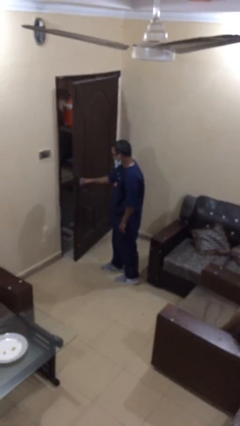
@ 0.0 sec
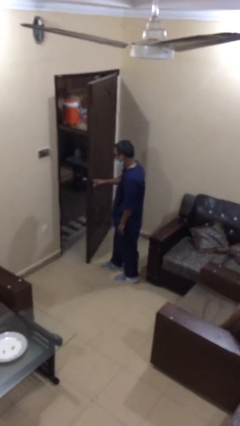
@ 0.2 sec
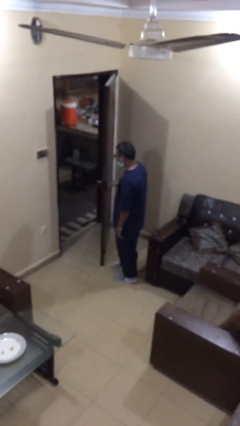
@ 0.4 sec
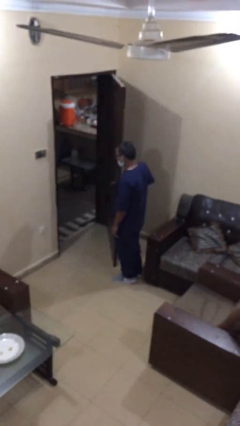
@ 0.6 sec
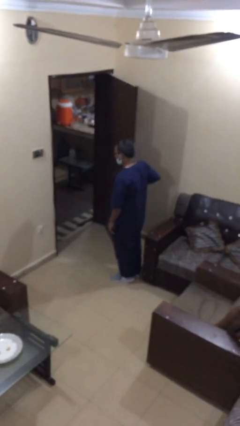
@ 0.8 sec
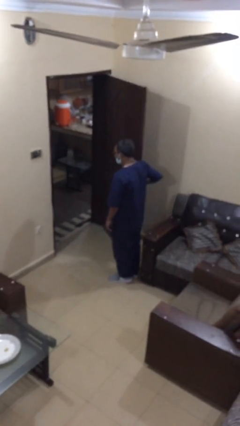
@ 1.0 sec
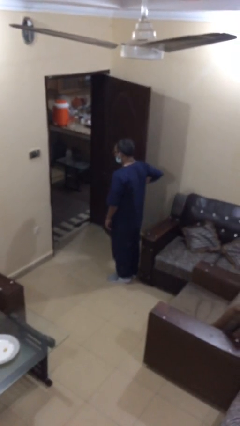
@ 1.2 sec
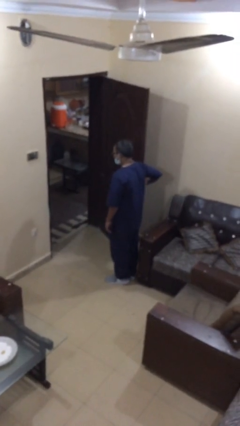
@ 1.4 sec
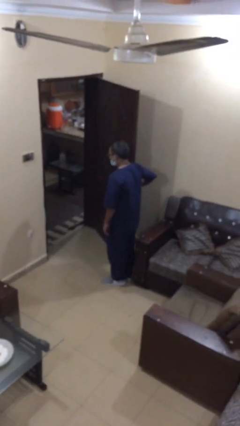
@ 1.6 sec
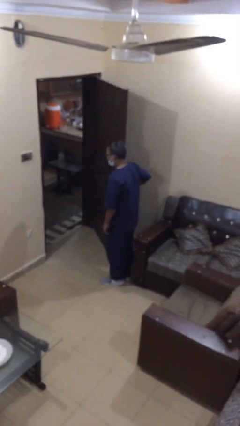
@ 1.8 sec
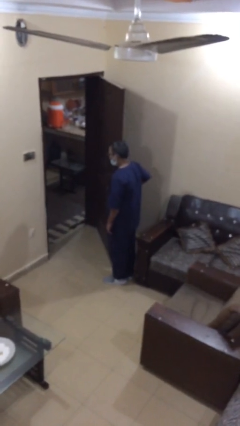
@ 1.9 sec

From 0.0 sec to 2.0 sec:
person opens facility door

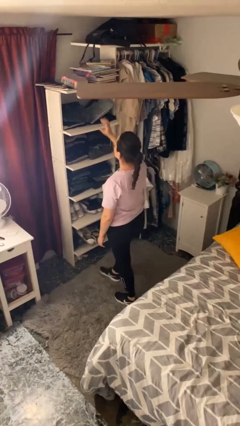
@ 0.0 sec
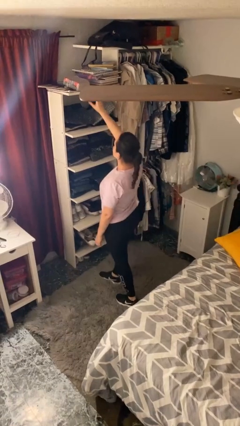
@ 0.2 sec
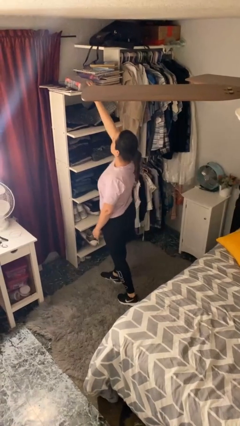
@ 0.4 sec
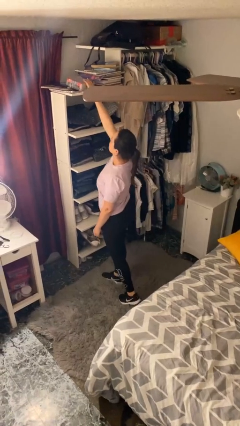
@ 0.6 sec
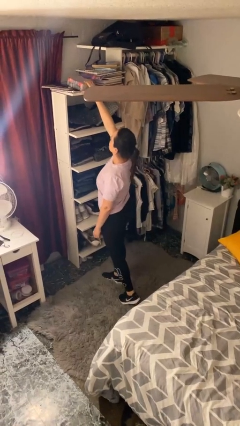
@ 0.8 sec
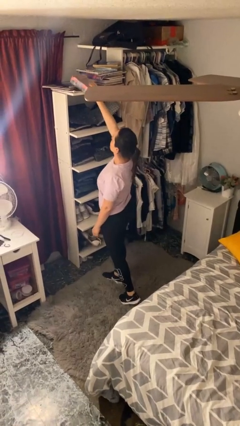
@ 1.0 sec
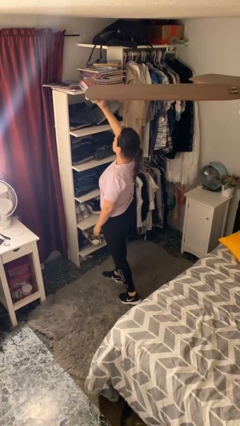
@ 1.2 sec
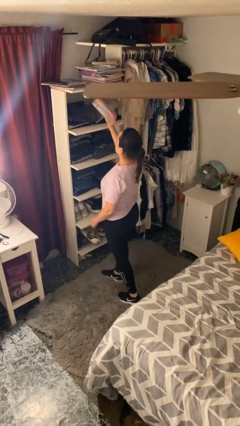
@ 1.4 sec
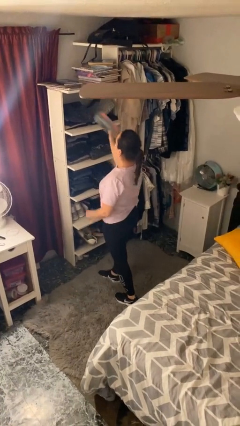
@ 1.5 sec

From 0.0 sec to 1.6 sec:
person picks up object from shelf

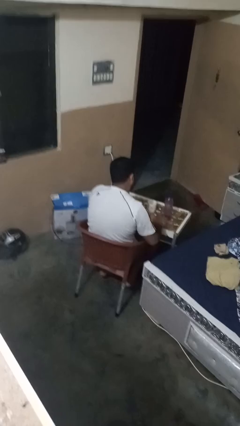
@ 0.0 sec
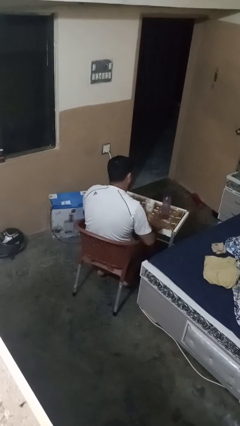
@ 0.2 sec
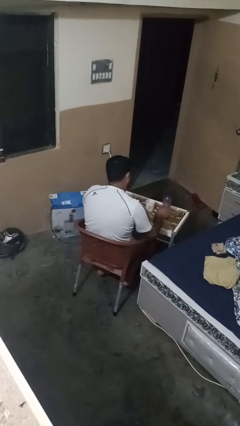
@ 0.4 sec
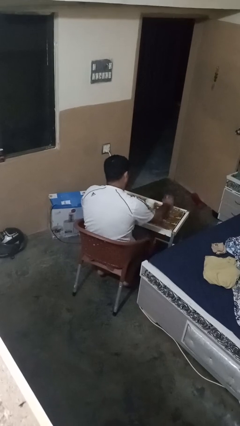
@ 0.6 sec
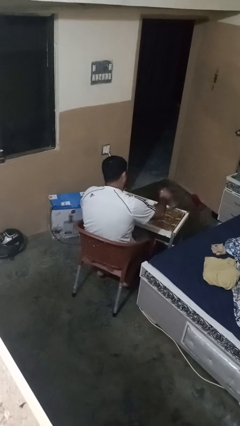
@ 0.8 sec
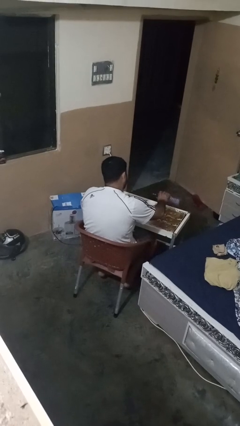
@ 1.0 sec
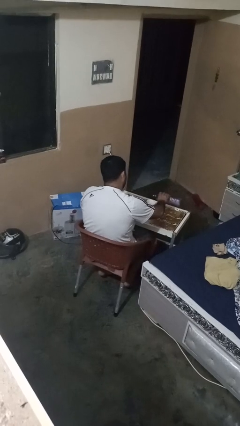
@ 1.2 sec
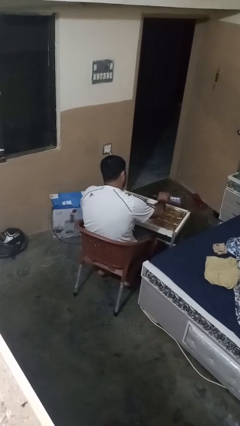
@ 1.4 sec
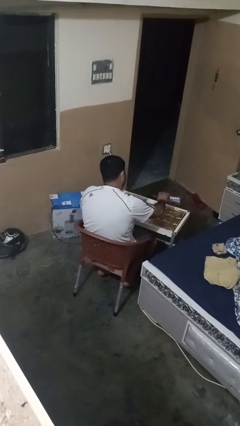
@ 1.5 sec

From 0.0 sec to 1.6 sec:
person pours liquid into cup

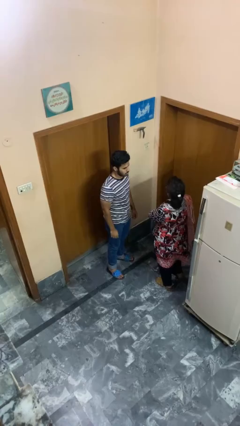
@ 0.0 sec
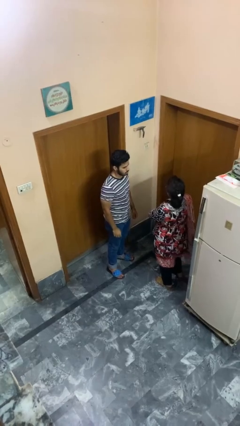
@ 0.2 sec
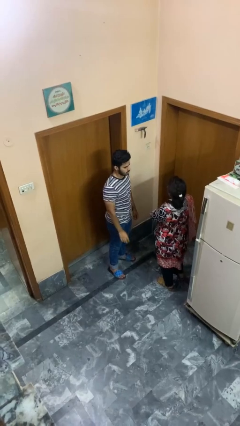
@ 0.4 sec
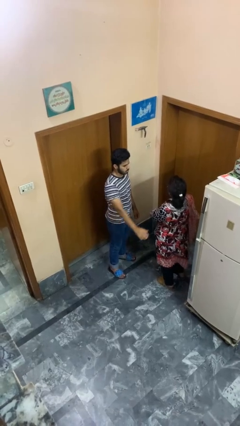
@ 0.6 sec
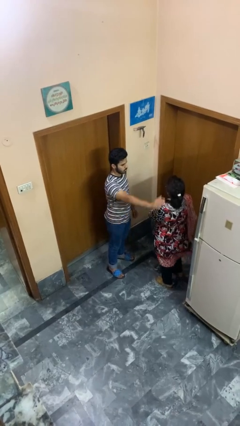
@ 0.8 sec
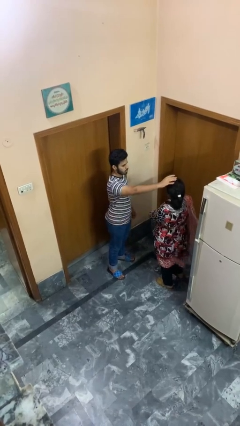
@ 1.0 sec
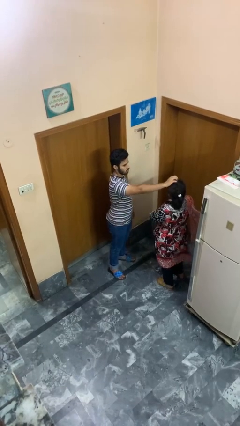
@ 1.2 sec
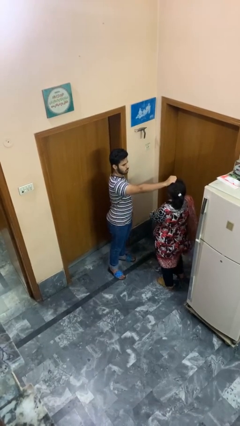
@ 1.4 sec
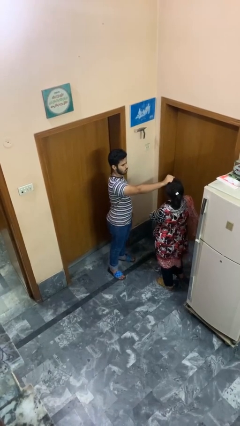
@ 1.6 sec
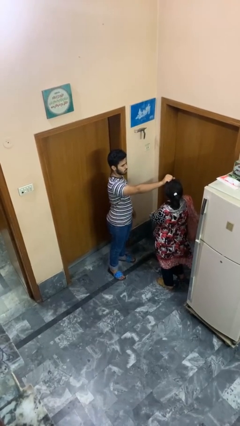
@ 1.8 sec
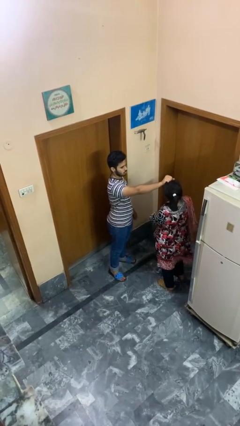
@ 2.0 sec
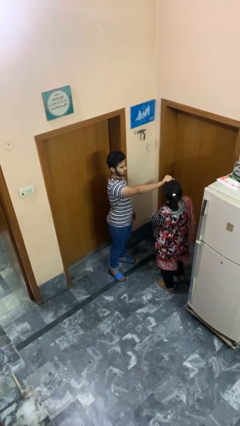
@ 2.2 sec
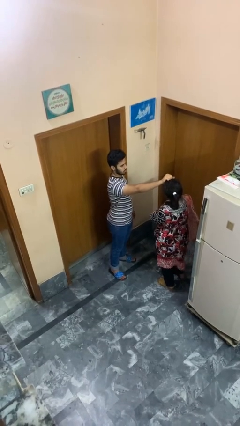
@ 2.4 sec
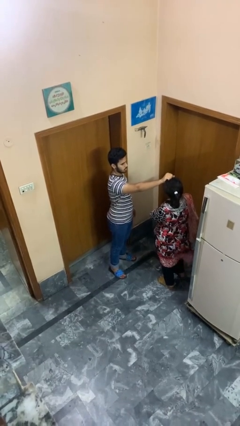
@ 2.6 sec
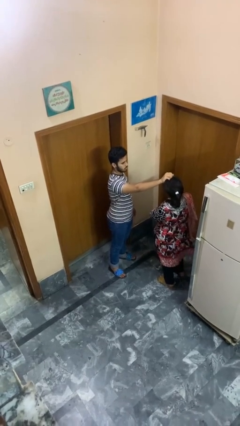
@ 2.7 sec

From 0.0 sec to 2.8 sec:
person grabs person by hair

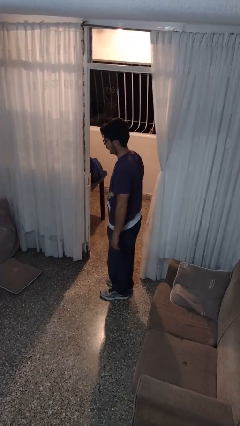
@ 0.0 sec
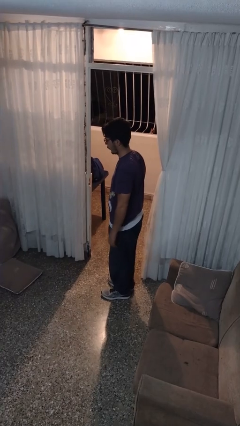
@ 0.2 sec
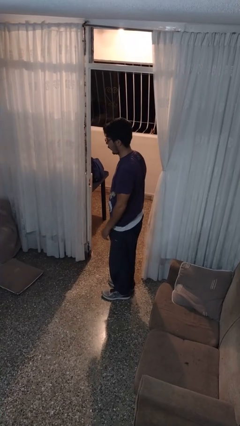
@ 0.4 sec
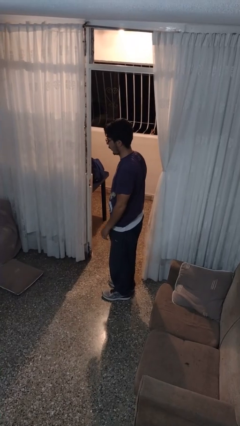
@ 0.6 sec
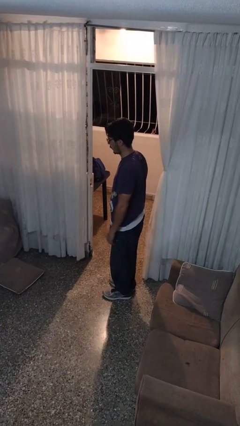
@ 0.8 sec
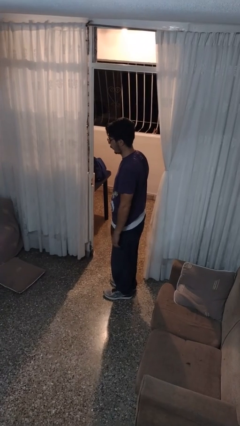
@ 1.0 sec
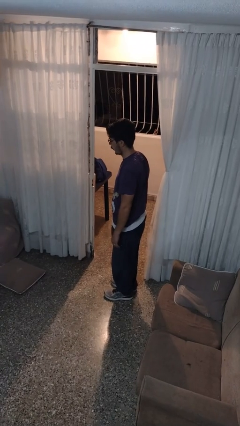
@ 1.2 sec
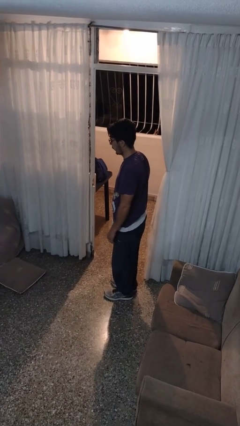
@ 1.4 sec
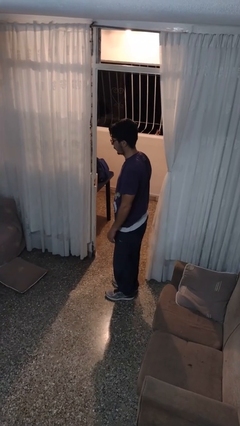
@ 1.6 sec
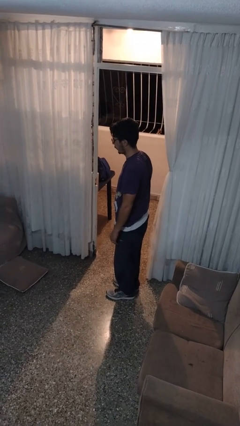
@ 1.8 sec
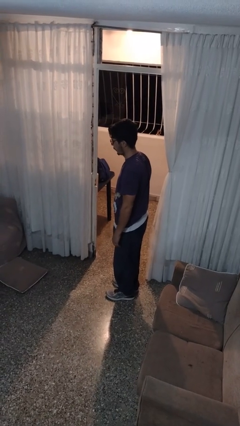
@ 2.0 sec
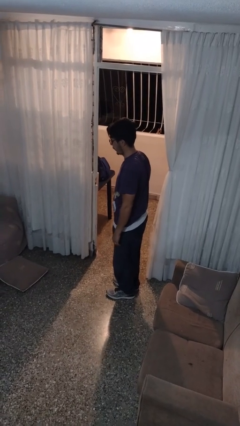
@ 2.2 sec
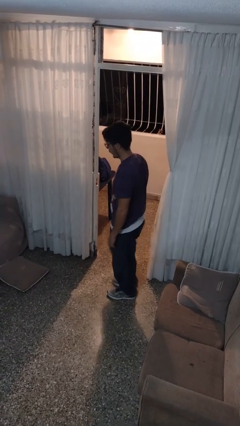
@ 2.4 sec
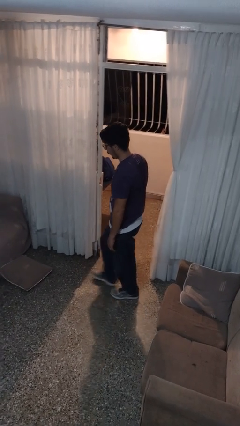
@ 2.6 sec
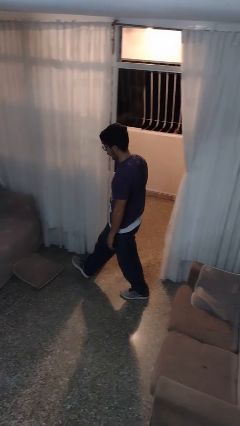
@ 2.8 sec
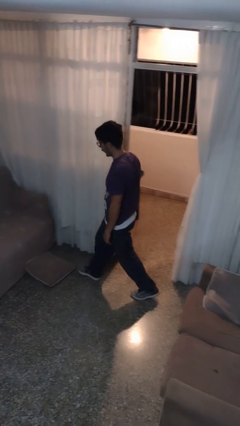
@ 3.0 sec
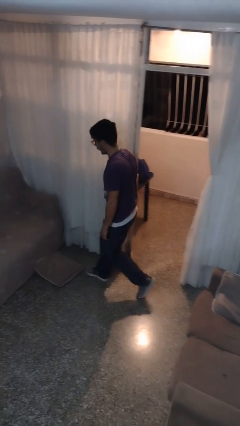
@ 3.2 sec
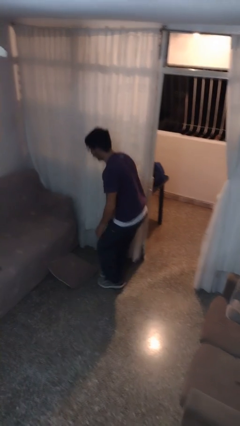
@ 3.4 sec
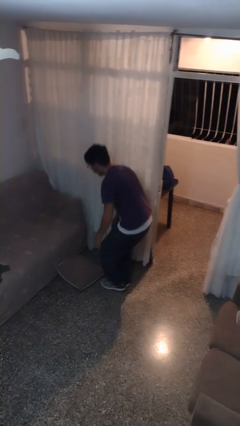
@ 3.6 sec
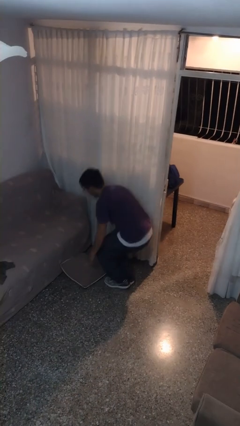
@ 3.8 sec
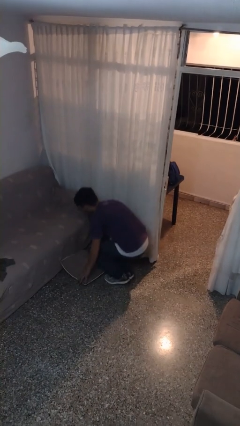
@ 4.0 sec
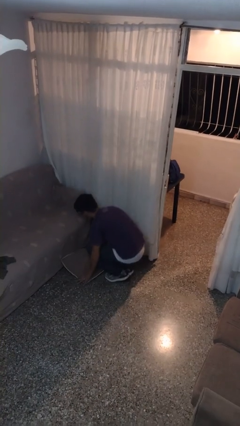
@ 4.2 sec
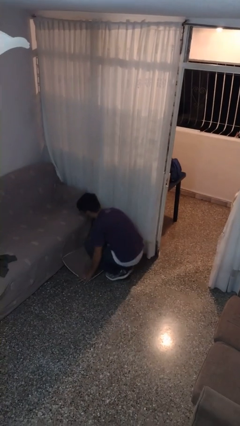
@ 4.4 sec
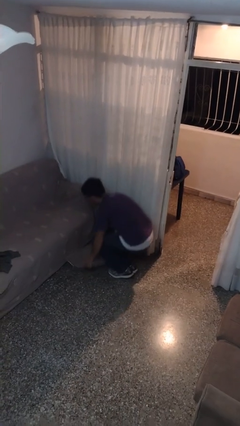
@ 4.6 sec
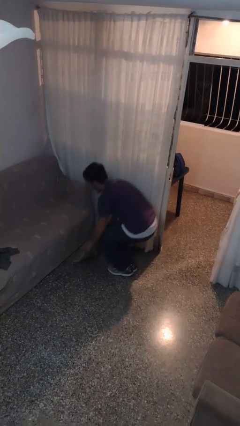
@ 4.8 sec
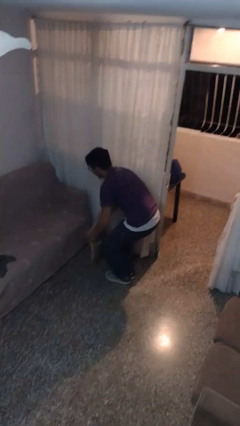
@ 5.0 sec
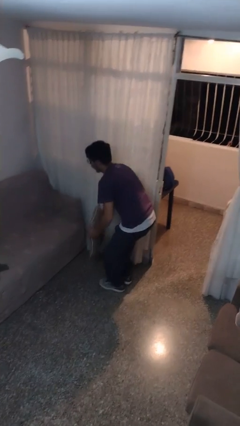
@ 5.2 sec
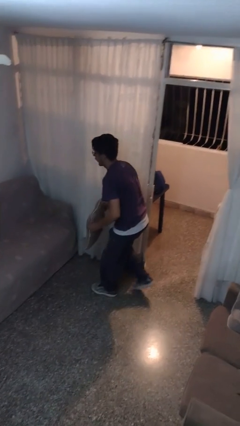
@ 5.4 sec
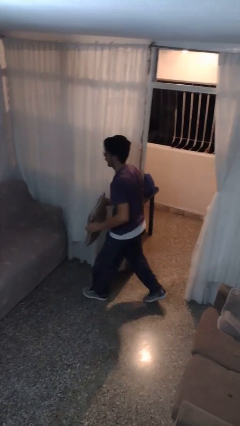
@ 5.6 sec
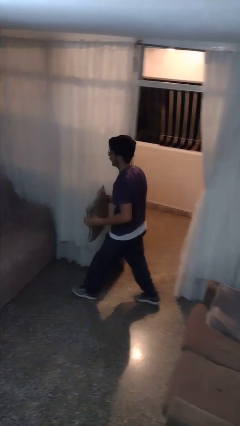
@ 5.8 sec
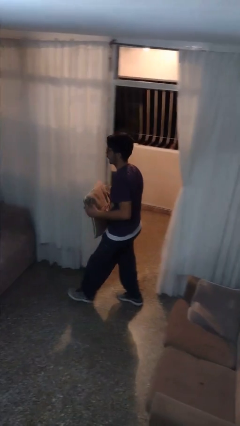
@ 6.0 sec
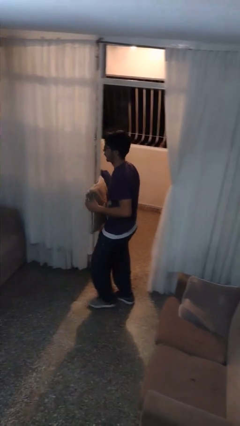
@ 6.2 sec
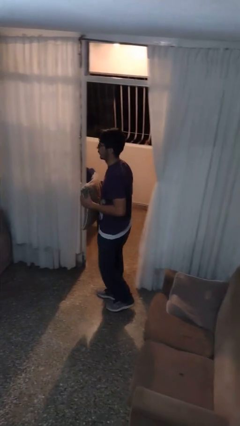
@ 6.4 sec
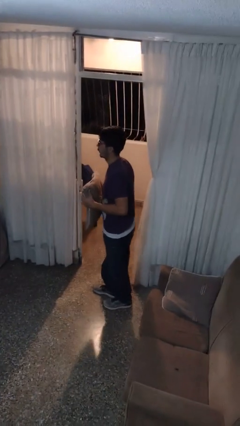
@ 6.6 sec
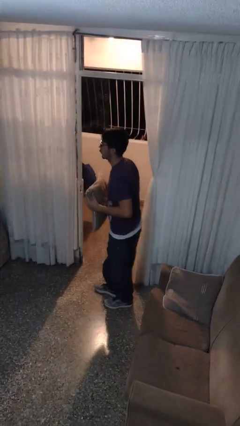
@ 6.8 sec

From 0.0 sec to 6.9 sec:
person picks up object from floor

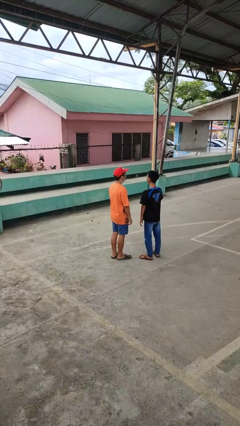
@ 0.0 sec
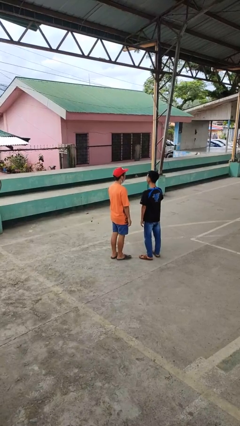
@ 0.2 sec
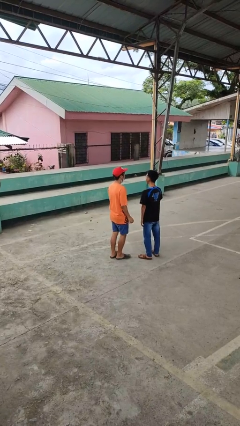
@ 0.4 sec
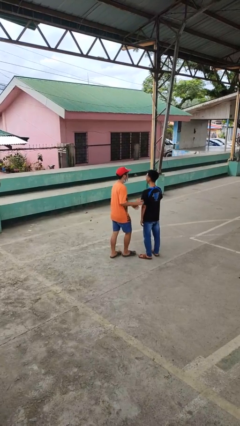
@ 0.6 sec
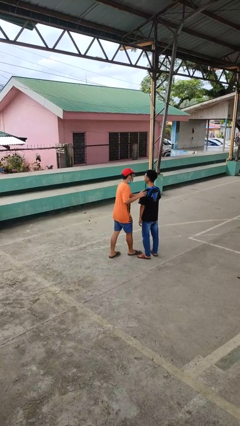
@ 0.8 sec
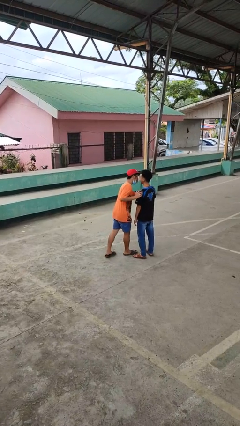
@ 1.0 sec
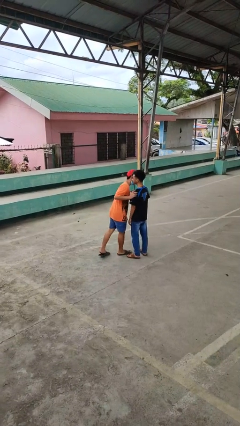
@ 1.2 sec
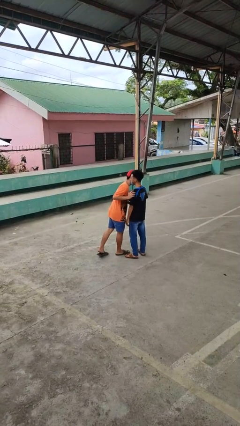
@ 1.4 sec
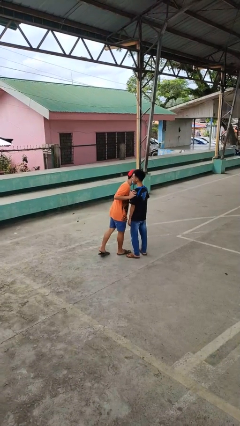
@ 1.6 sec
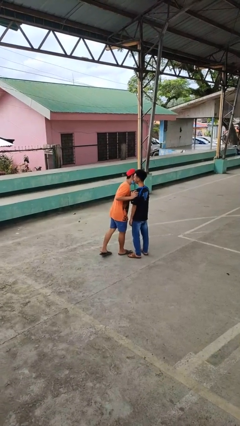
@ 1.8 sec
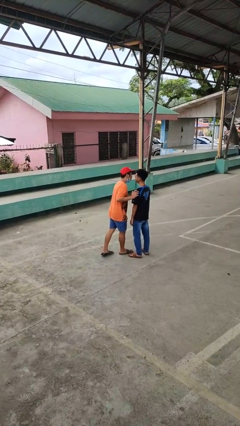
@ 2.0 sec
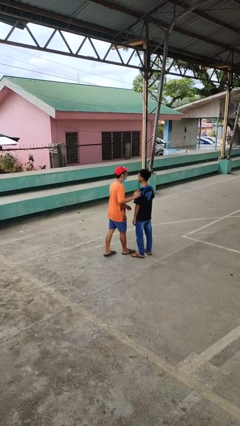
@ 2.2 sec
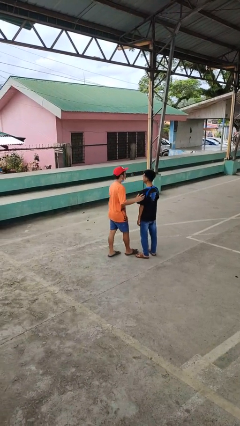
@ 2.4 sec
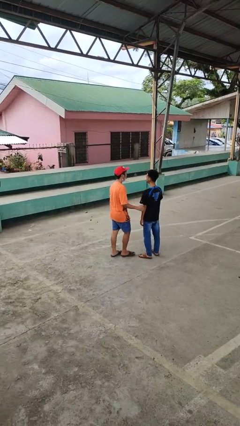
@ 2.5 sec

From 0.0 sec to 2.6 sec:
person kisses cheek of person
